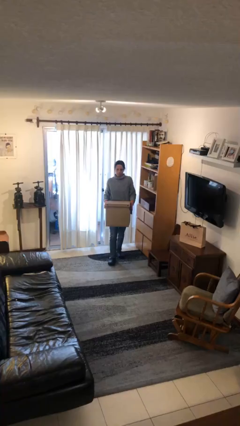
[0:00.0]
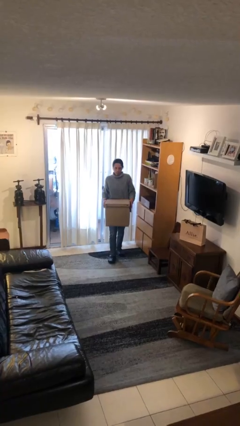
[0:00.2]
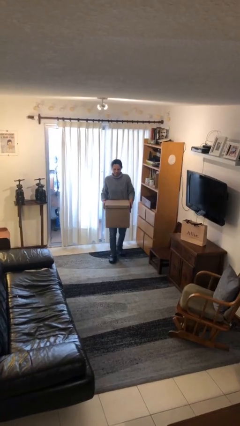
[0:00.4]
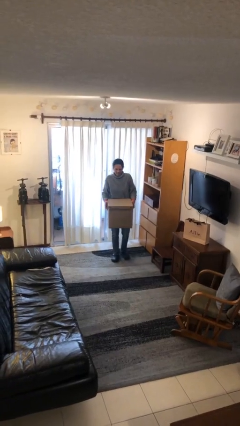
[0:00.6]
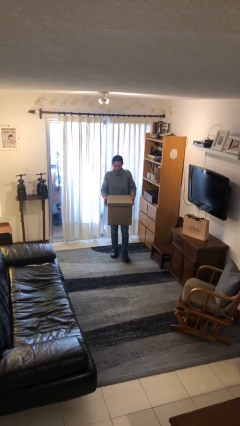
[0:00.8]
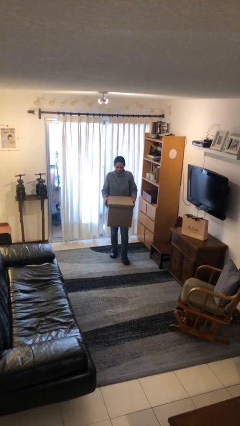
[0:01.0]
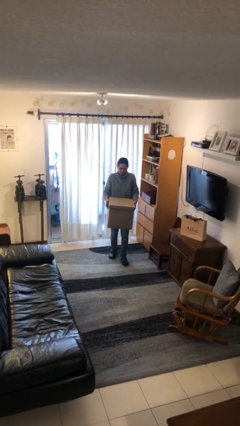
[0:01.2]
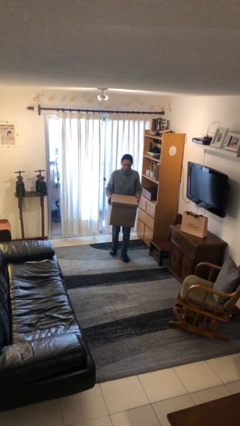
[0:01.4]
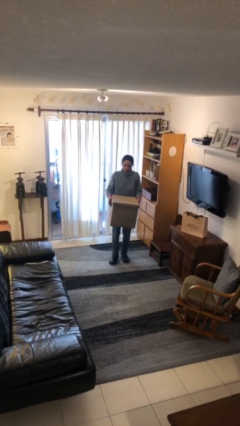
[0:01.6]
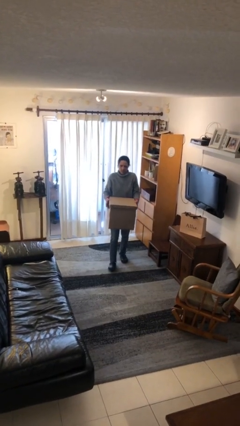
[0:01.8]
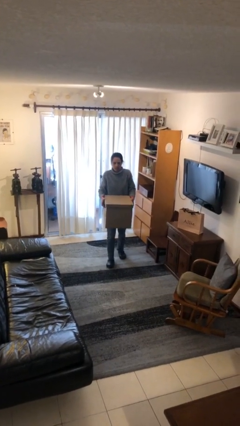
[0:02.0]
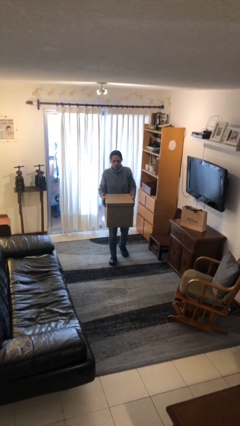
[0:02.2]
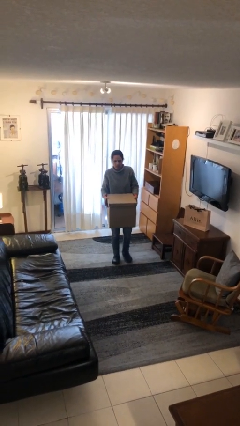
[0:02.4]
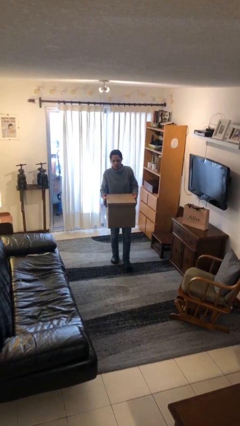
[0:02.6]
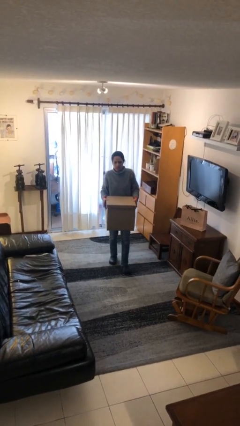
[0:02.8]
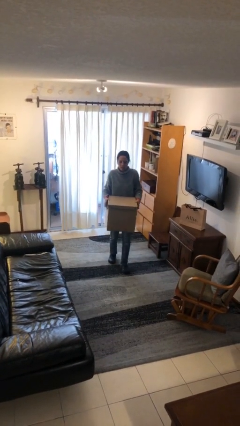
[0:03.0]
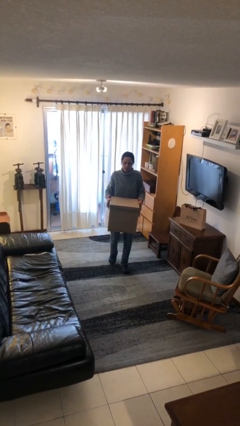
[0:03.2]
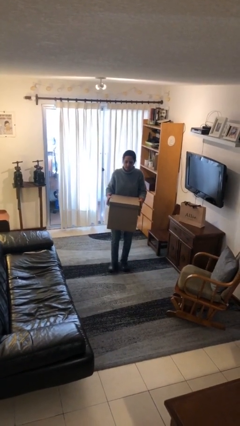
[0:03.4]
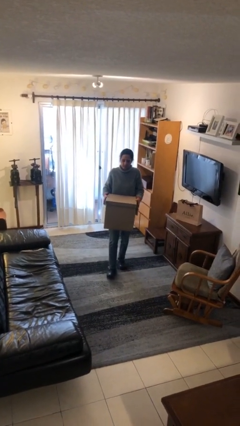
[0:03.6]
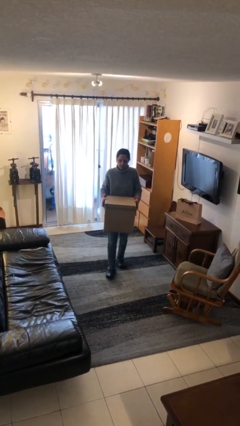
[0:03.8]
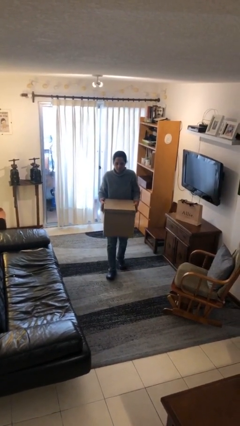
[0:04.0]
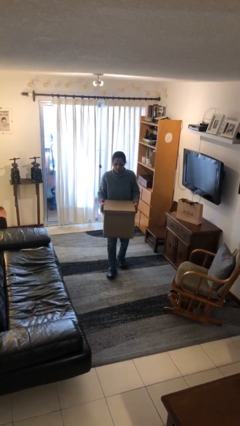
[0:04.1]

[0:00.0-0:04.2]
person carries heavy object

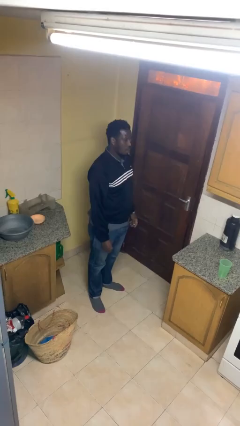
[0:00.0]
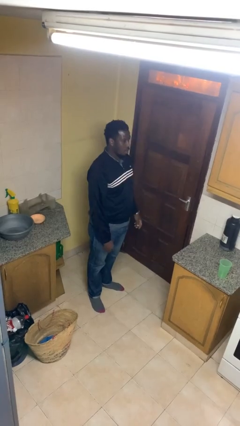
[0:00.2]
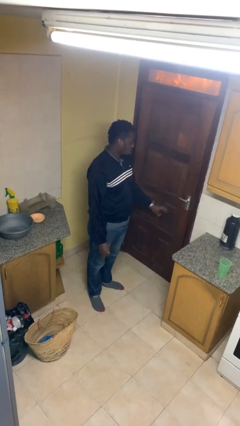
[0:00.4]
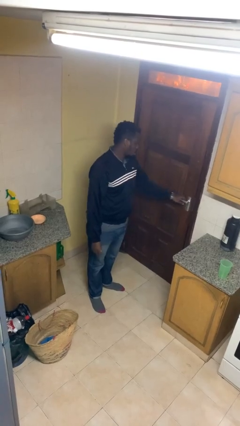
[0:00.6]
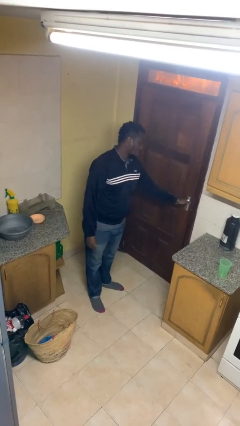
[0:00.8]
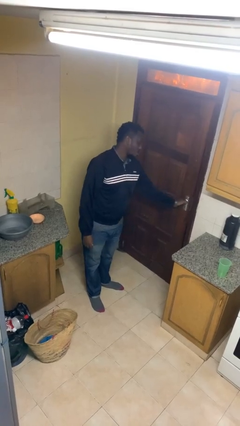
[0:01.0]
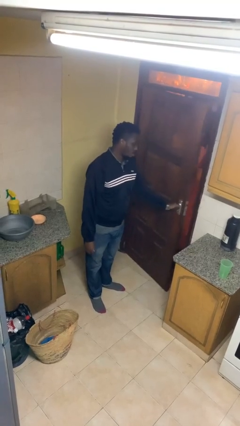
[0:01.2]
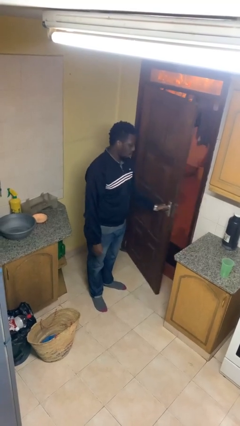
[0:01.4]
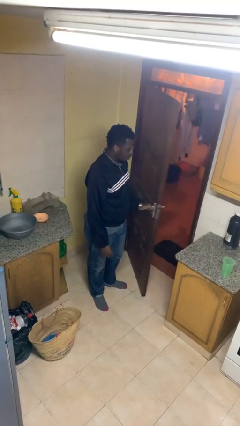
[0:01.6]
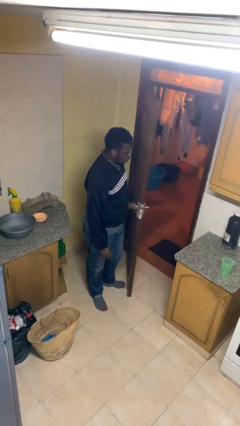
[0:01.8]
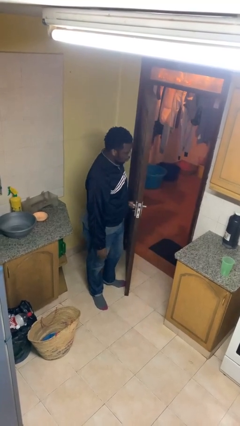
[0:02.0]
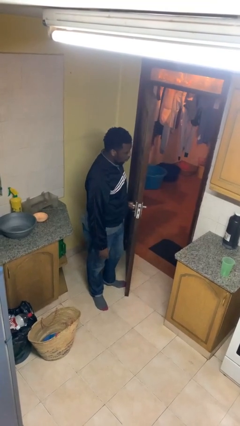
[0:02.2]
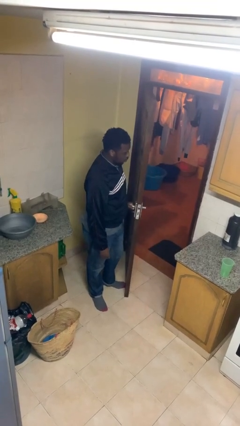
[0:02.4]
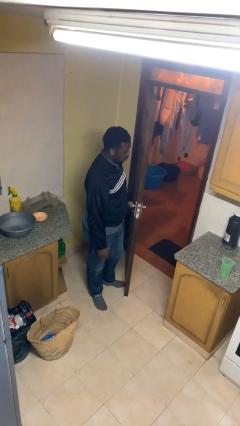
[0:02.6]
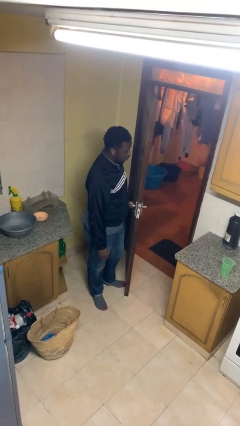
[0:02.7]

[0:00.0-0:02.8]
person opens facility door

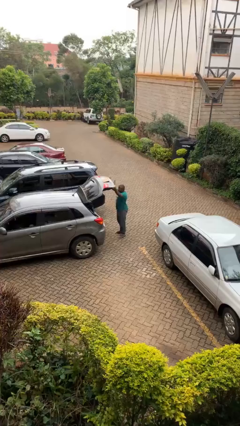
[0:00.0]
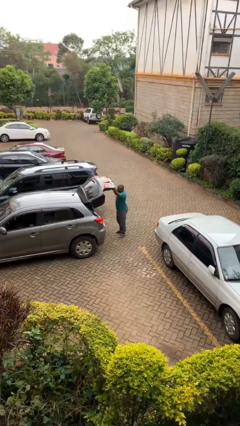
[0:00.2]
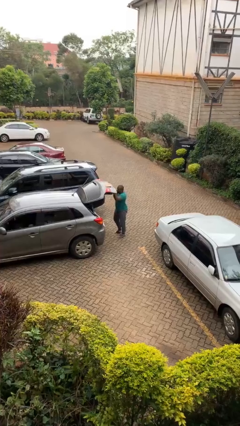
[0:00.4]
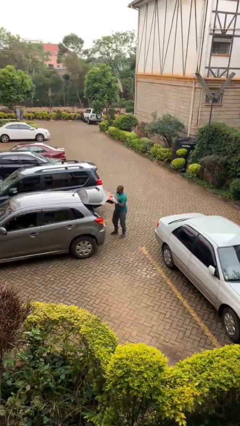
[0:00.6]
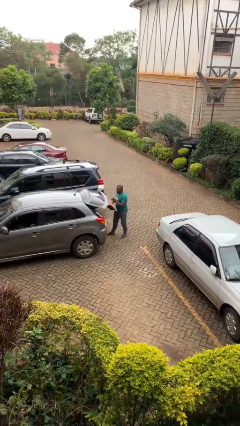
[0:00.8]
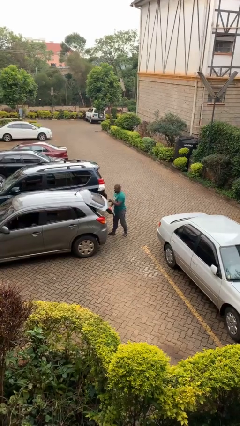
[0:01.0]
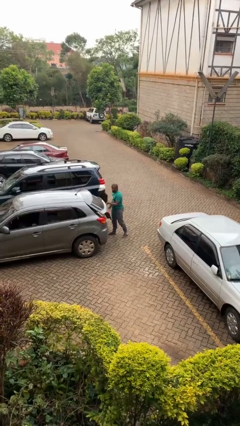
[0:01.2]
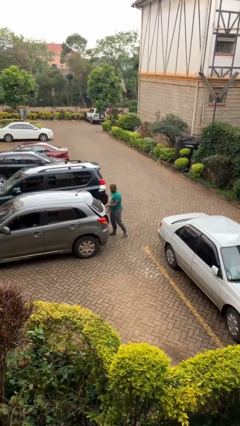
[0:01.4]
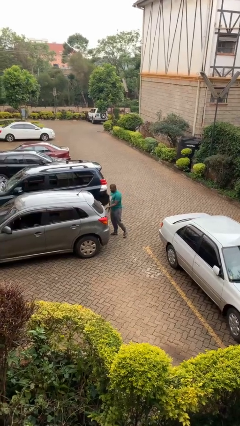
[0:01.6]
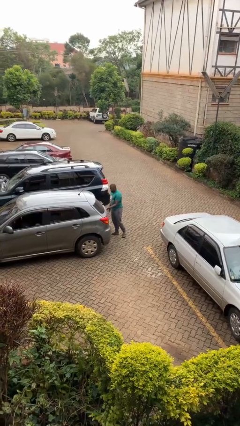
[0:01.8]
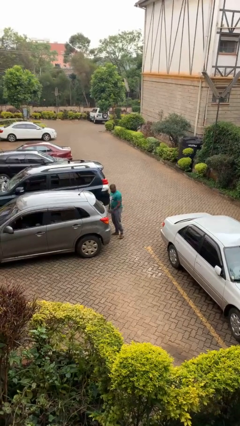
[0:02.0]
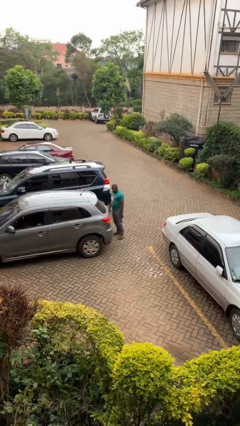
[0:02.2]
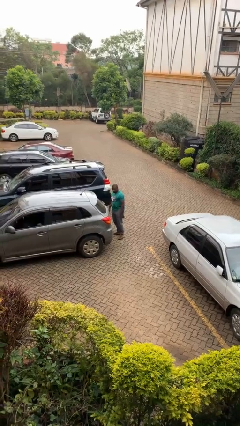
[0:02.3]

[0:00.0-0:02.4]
person closes car trunk

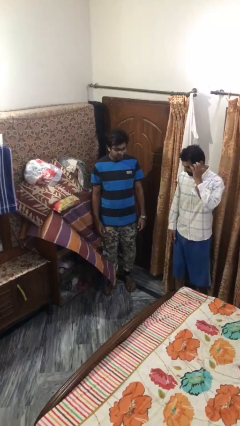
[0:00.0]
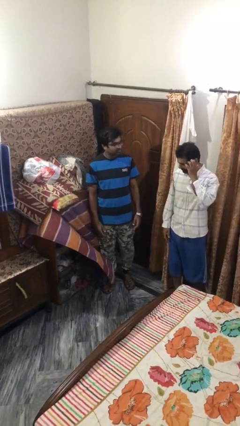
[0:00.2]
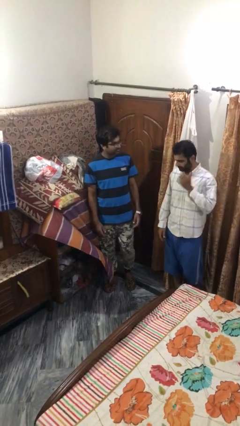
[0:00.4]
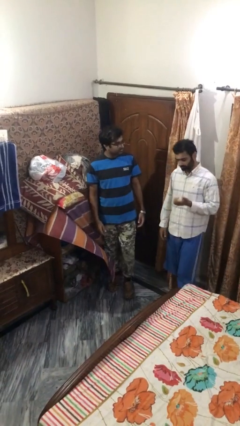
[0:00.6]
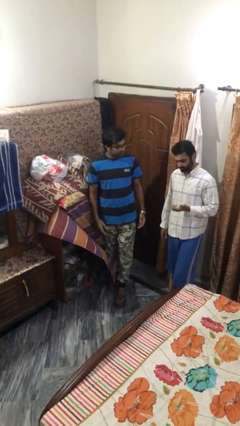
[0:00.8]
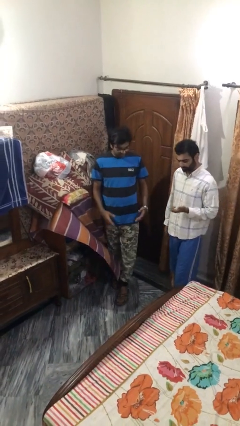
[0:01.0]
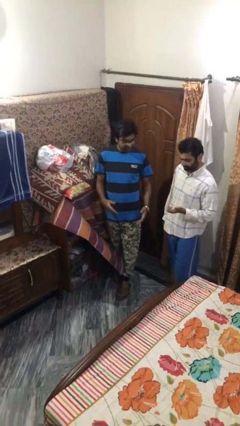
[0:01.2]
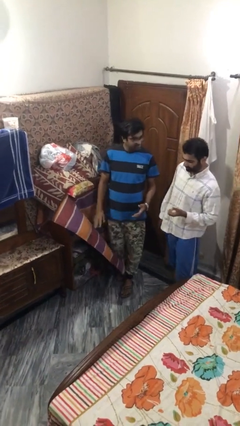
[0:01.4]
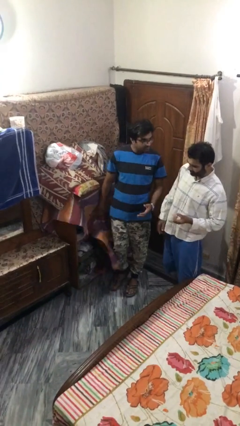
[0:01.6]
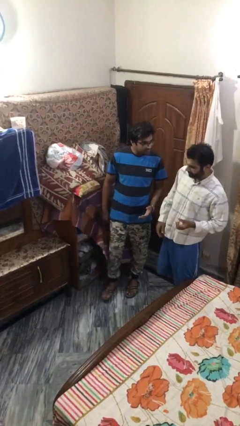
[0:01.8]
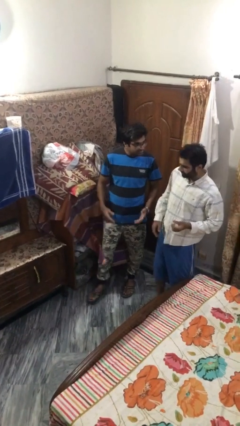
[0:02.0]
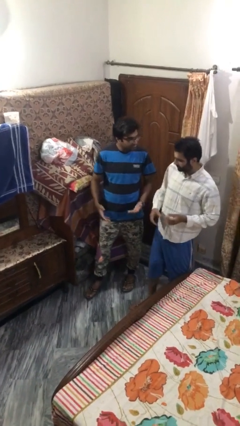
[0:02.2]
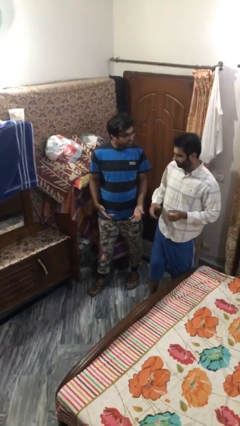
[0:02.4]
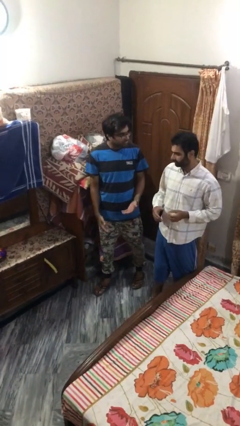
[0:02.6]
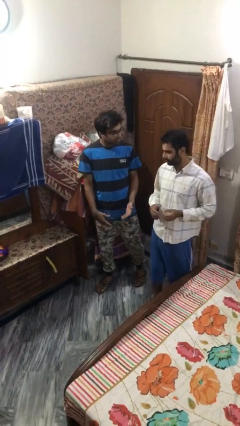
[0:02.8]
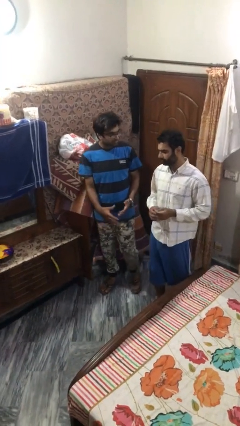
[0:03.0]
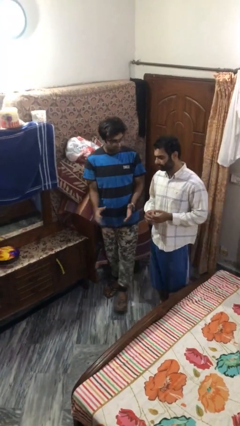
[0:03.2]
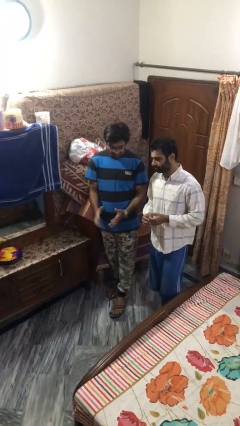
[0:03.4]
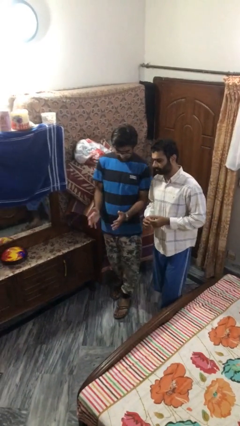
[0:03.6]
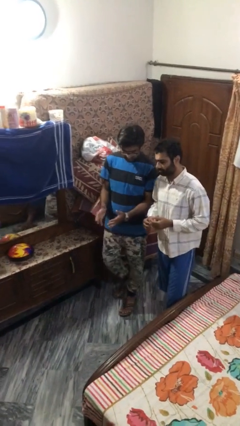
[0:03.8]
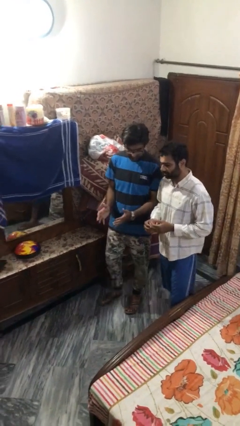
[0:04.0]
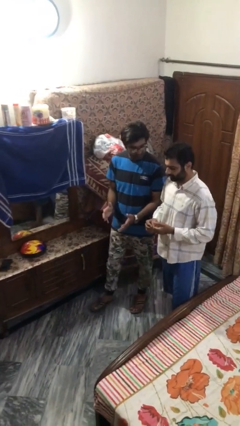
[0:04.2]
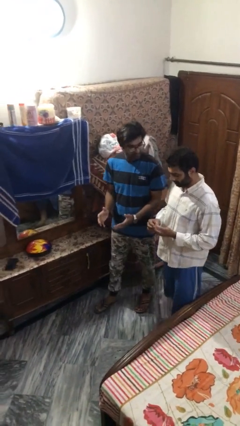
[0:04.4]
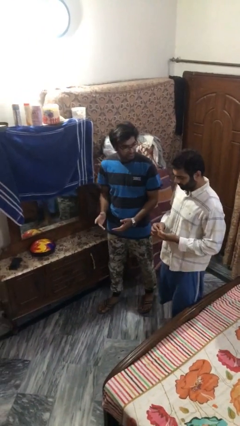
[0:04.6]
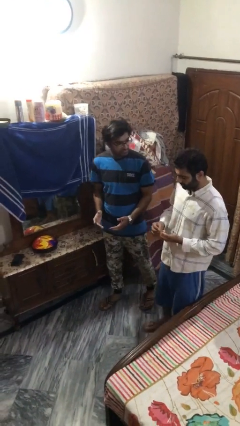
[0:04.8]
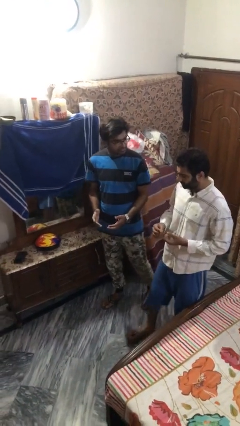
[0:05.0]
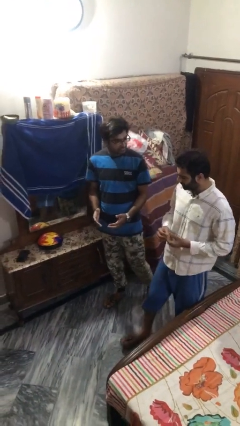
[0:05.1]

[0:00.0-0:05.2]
person talks to person

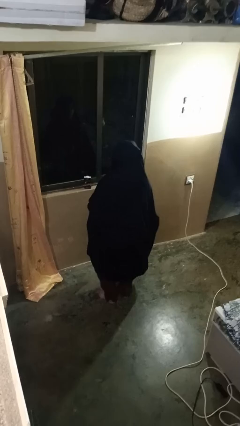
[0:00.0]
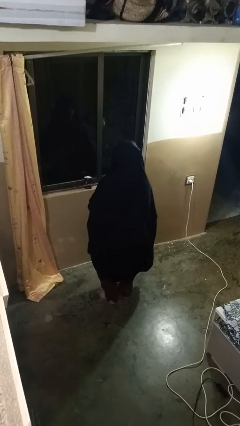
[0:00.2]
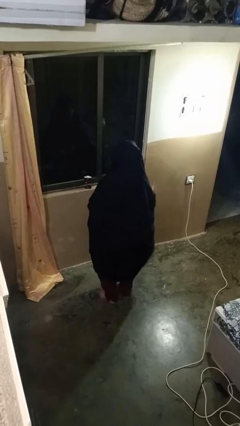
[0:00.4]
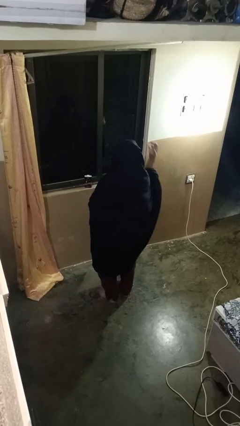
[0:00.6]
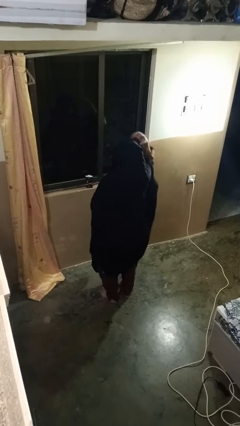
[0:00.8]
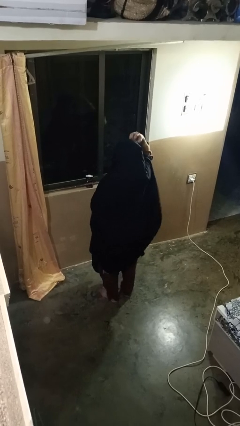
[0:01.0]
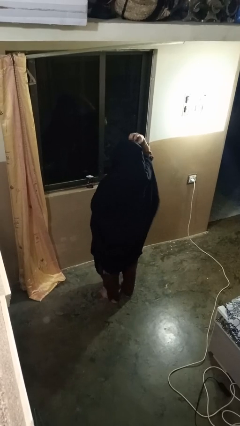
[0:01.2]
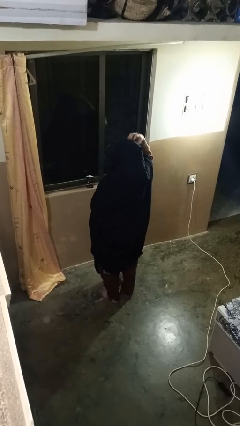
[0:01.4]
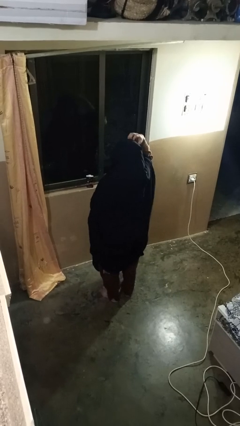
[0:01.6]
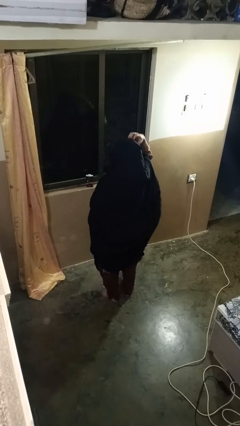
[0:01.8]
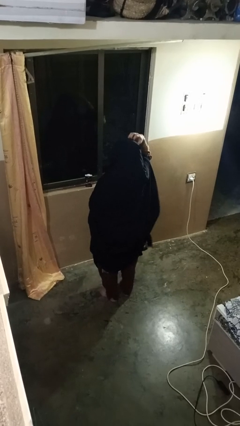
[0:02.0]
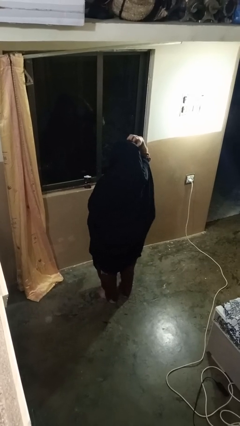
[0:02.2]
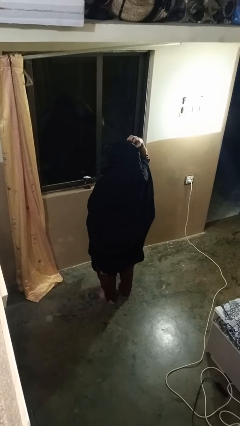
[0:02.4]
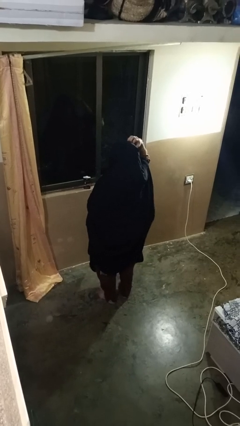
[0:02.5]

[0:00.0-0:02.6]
person scratches face

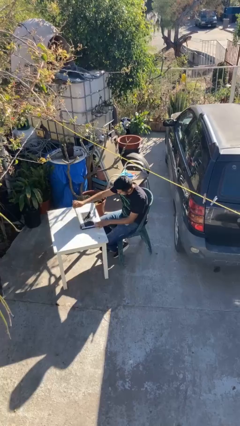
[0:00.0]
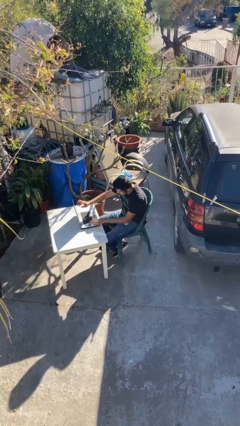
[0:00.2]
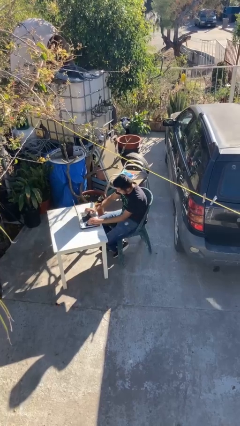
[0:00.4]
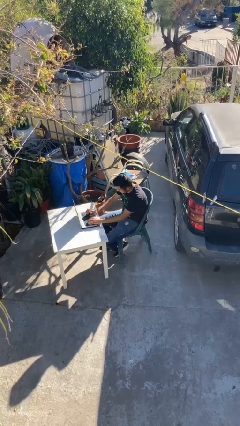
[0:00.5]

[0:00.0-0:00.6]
person interacts with laptop
